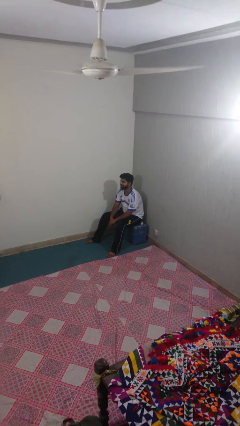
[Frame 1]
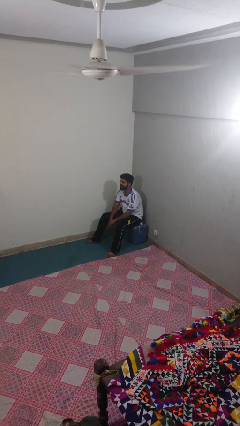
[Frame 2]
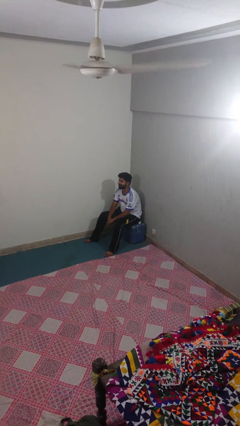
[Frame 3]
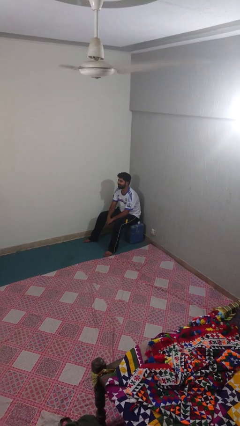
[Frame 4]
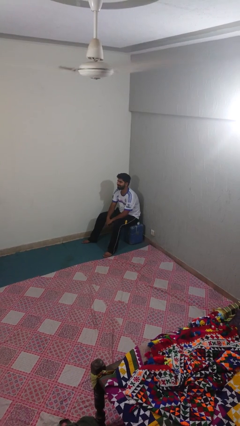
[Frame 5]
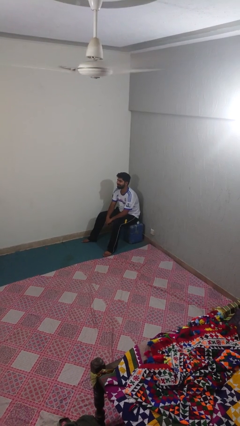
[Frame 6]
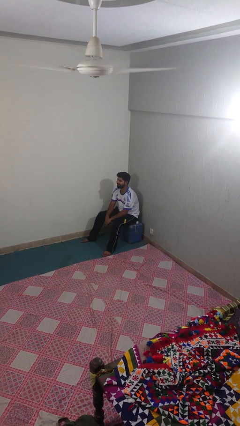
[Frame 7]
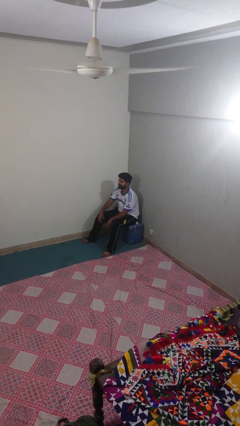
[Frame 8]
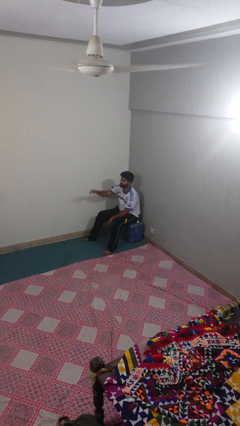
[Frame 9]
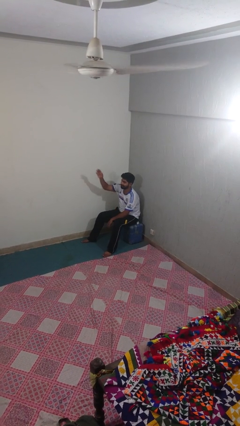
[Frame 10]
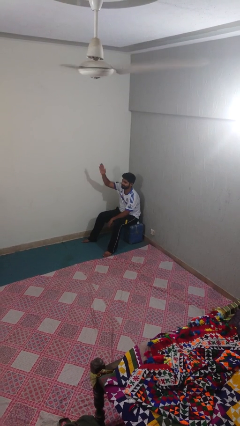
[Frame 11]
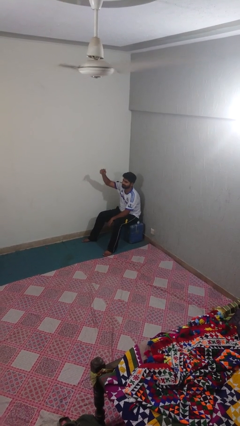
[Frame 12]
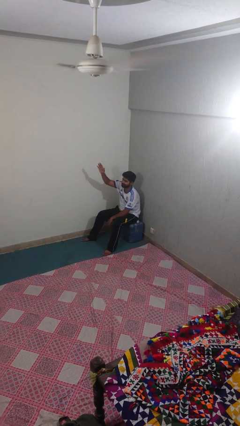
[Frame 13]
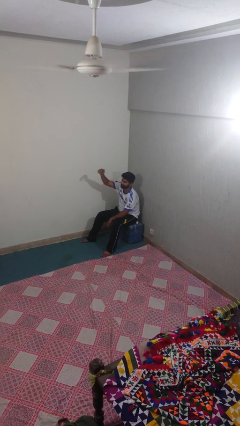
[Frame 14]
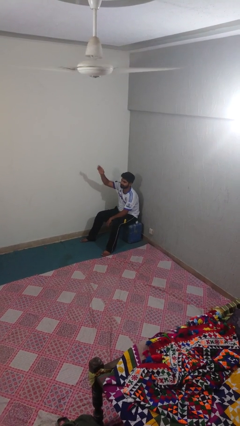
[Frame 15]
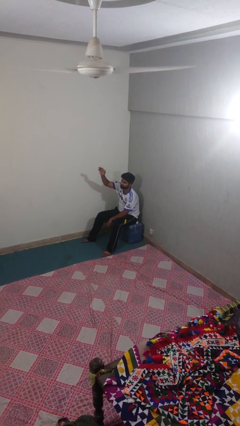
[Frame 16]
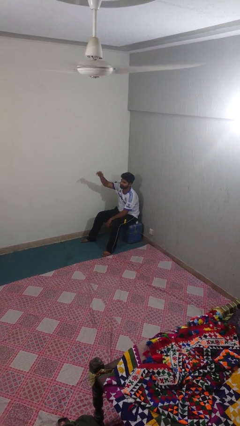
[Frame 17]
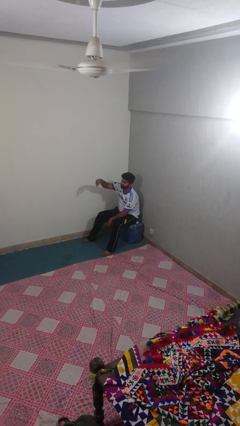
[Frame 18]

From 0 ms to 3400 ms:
person gestures come here

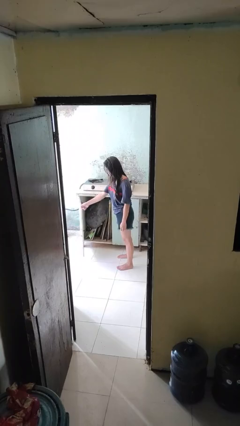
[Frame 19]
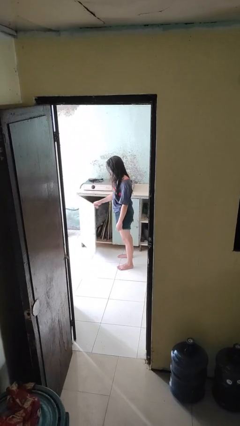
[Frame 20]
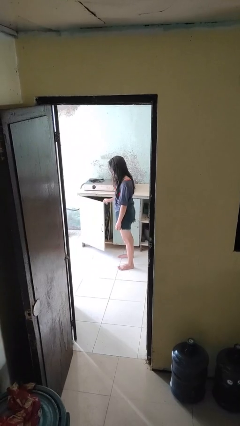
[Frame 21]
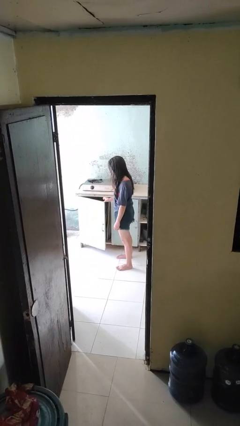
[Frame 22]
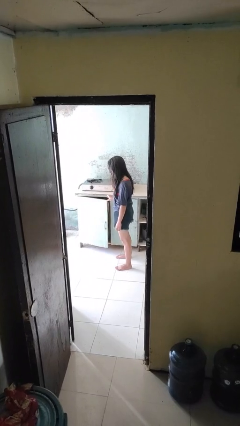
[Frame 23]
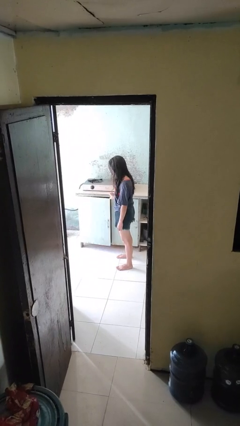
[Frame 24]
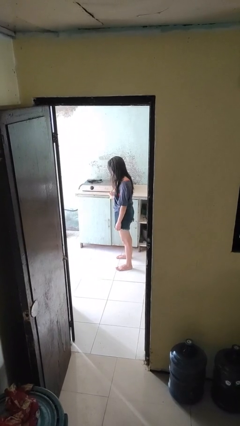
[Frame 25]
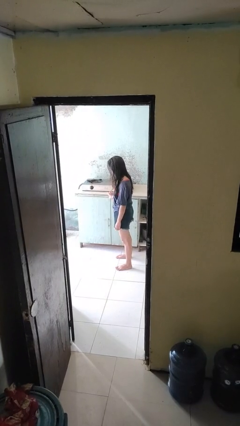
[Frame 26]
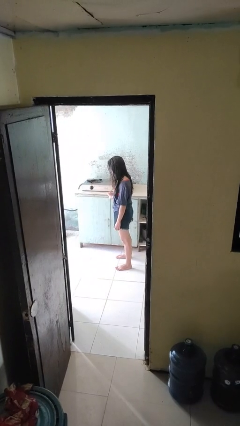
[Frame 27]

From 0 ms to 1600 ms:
person closes cabinet

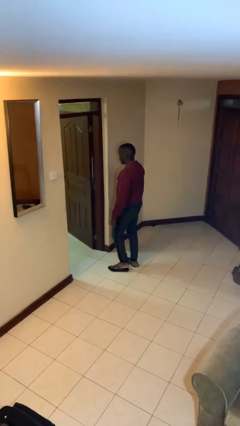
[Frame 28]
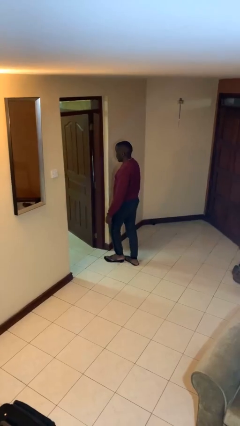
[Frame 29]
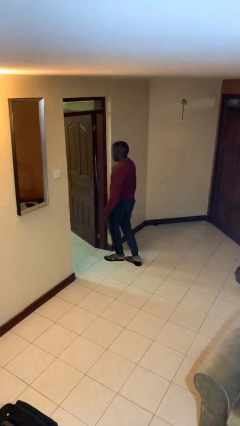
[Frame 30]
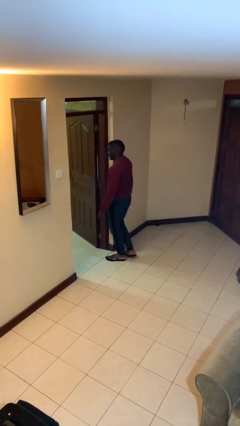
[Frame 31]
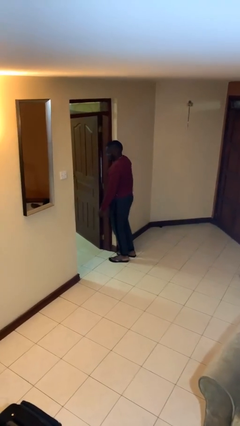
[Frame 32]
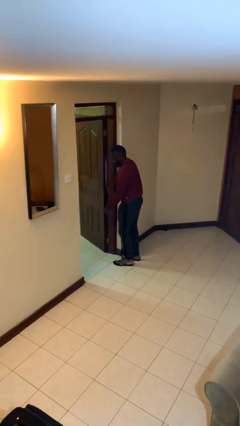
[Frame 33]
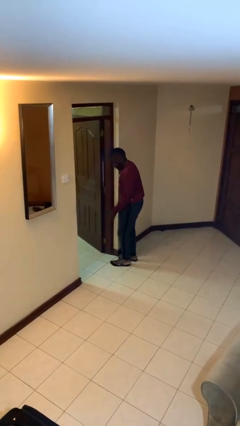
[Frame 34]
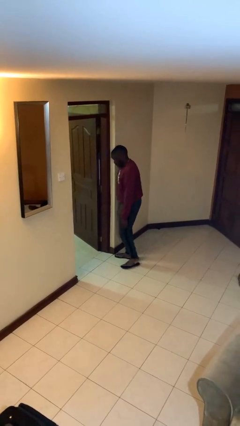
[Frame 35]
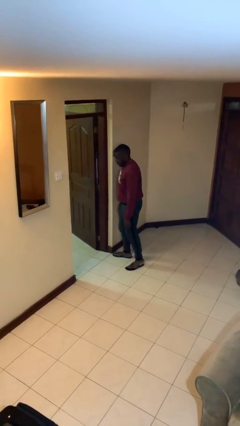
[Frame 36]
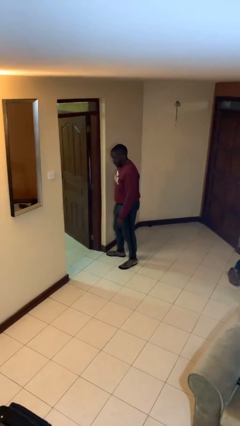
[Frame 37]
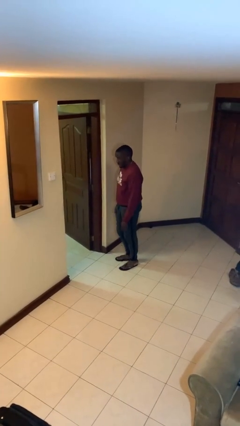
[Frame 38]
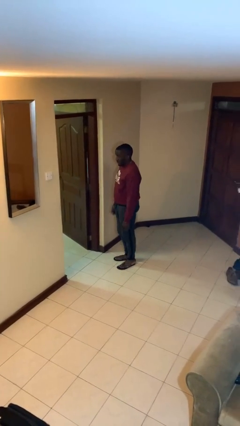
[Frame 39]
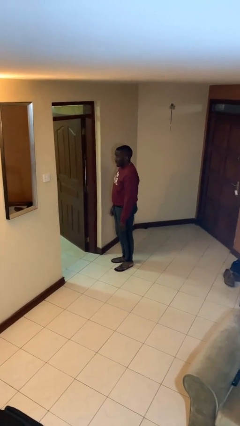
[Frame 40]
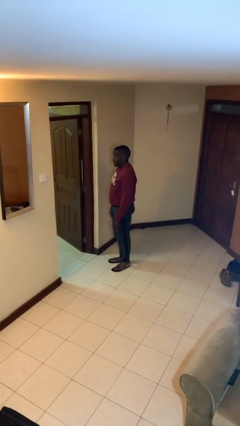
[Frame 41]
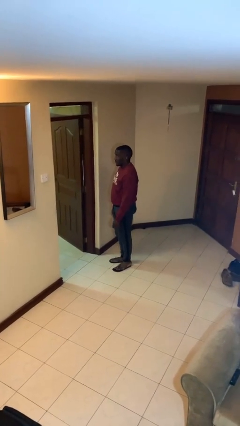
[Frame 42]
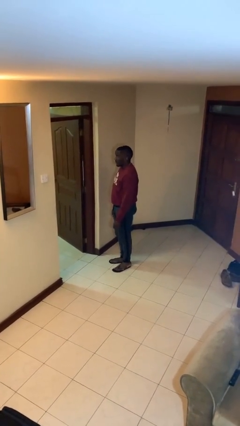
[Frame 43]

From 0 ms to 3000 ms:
person bumps into wall

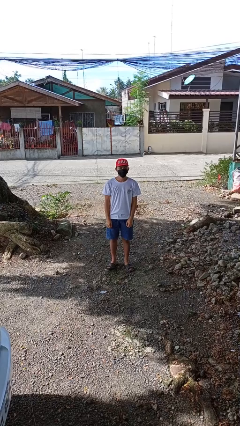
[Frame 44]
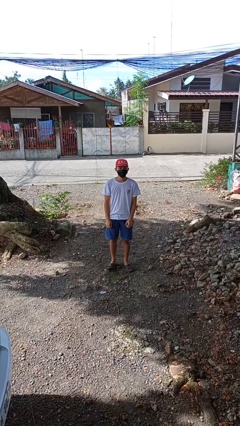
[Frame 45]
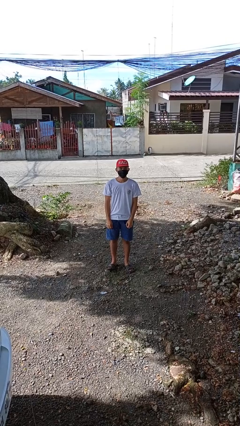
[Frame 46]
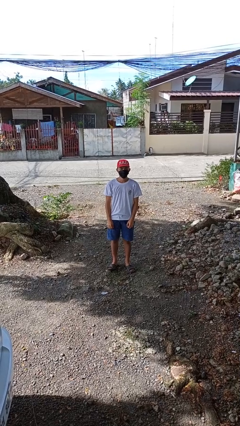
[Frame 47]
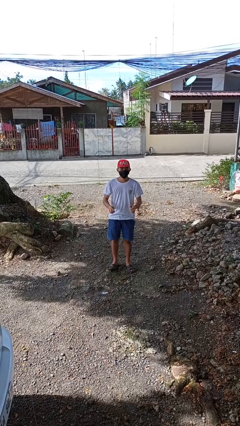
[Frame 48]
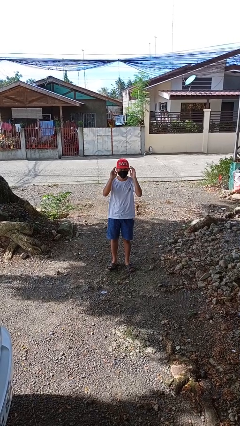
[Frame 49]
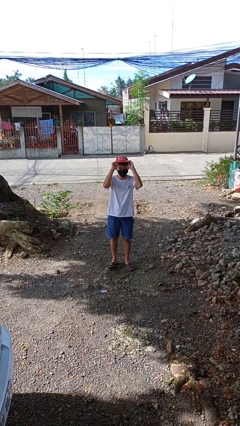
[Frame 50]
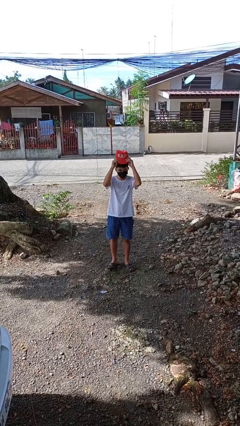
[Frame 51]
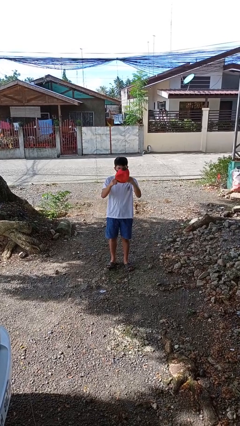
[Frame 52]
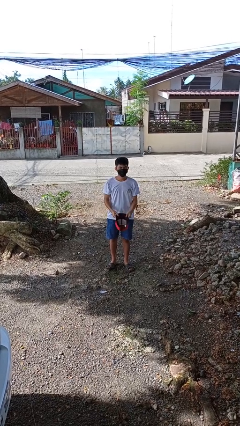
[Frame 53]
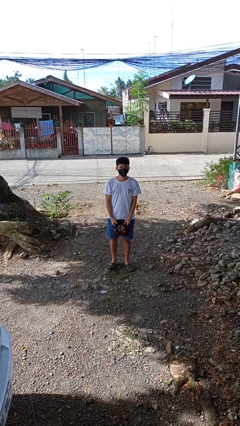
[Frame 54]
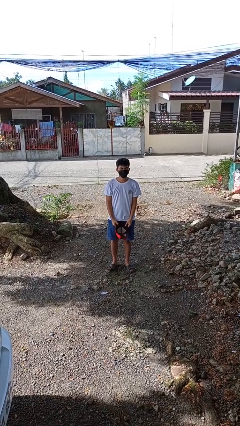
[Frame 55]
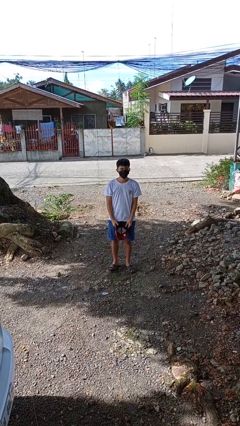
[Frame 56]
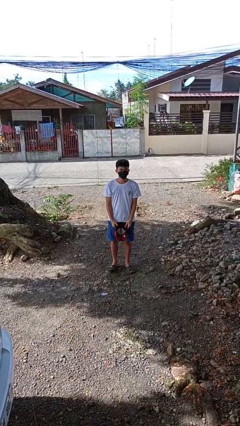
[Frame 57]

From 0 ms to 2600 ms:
person takes off hat

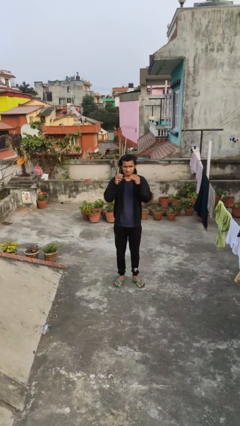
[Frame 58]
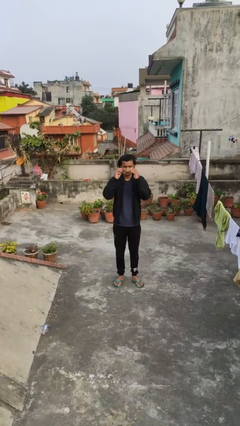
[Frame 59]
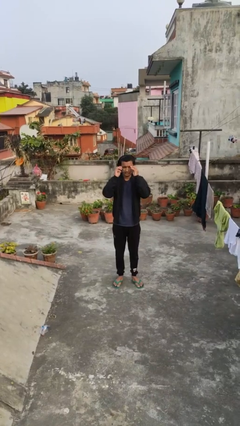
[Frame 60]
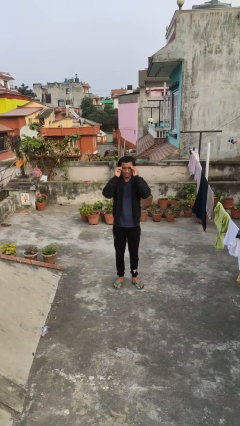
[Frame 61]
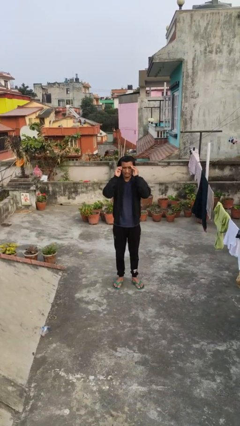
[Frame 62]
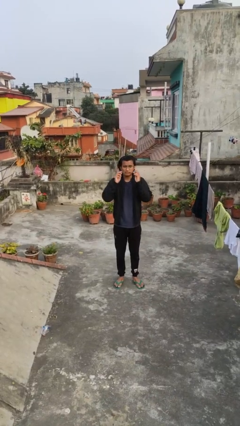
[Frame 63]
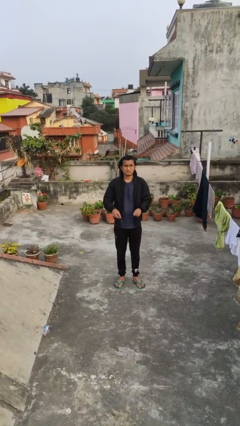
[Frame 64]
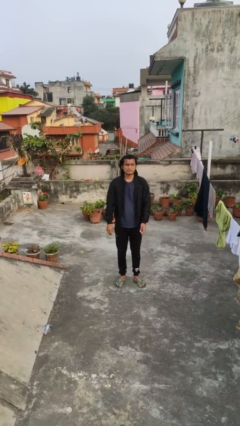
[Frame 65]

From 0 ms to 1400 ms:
person puts on glasses

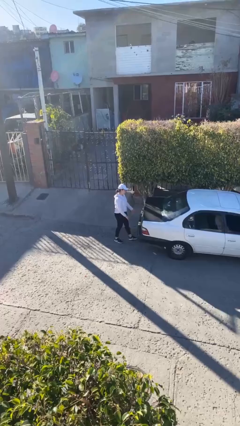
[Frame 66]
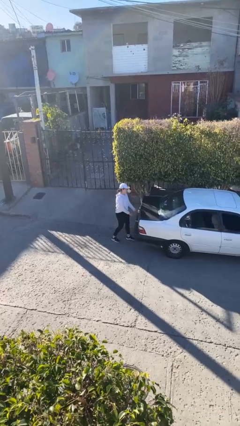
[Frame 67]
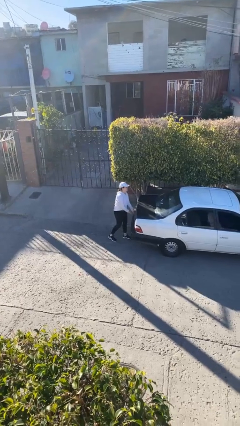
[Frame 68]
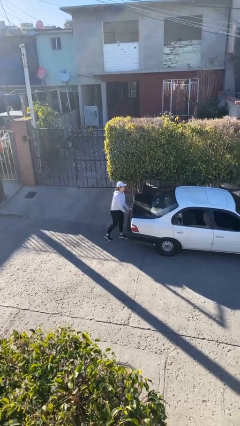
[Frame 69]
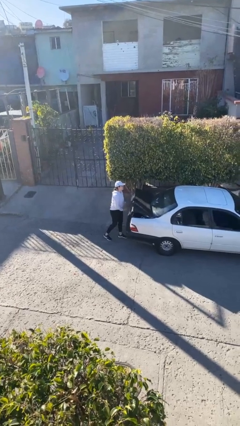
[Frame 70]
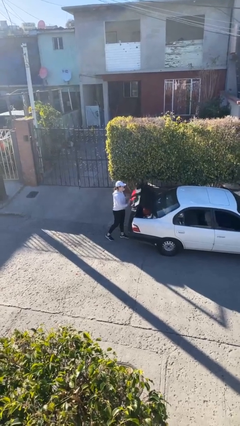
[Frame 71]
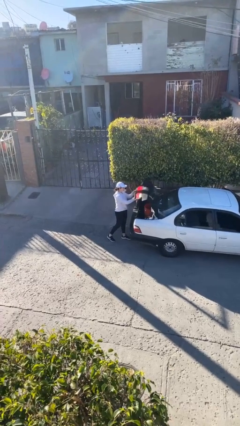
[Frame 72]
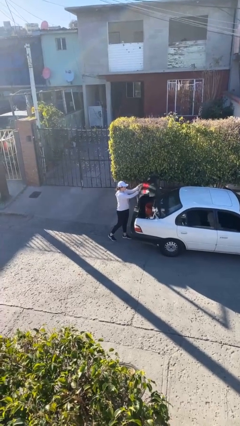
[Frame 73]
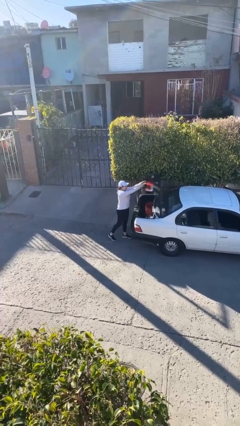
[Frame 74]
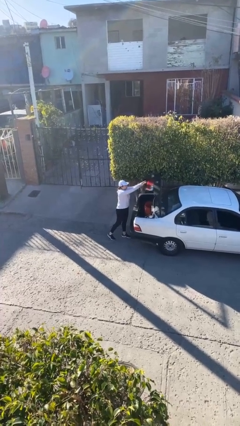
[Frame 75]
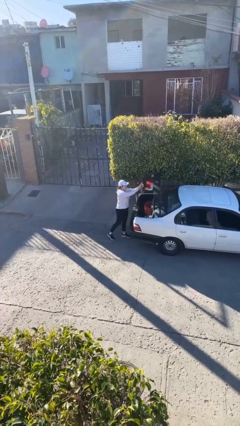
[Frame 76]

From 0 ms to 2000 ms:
person opens car trunk

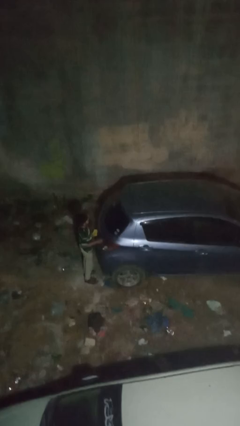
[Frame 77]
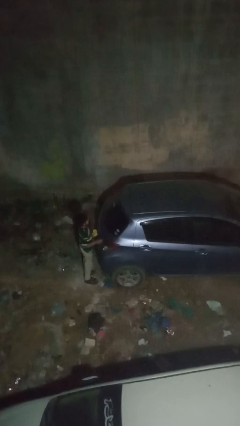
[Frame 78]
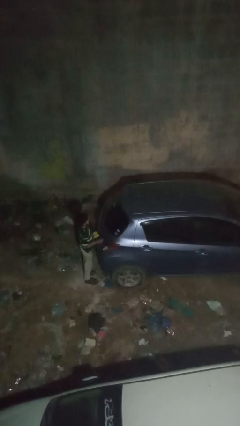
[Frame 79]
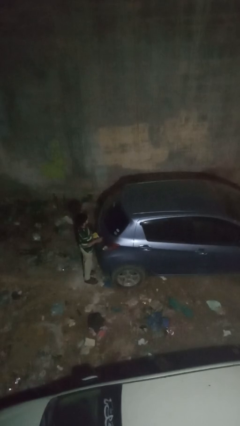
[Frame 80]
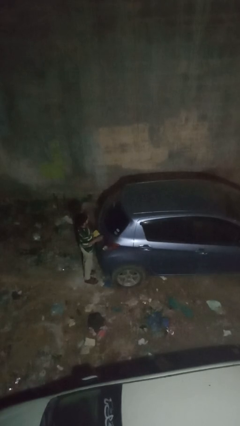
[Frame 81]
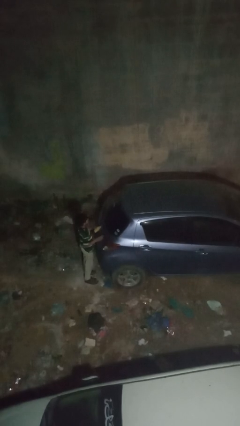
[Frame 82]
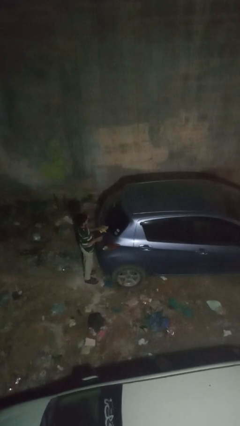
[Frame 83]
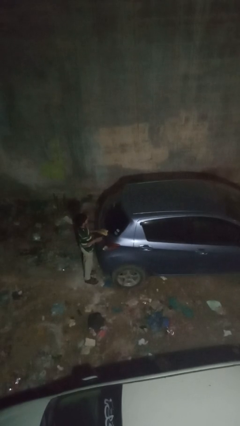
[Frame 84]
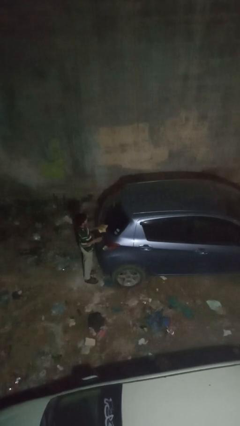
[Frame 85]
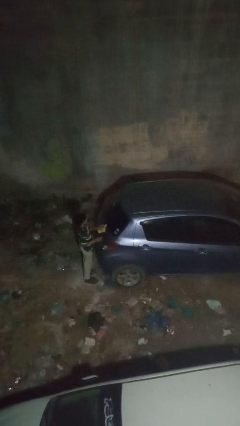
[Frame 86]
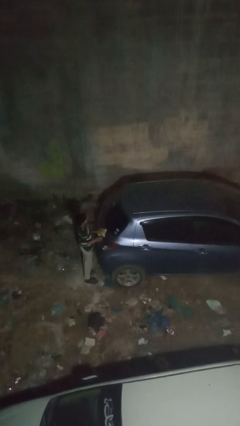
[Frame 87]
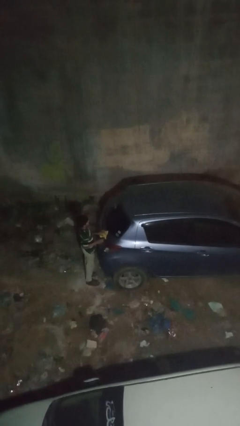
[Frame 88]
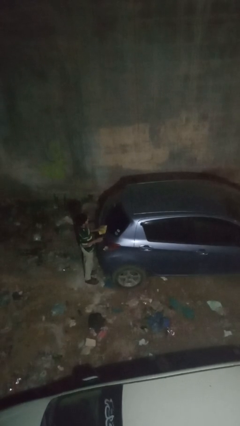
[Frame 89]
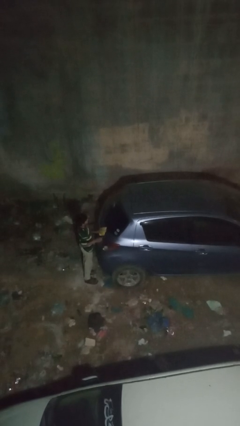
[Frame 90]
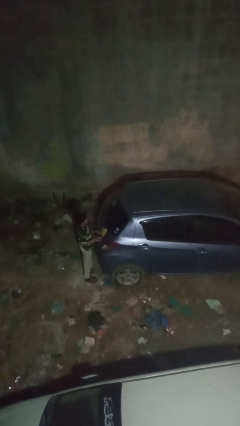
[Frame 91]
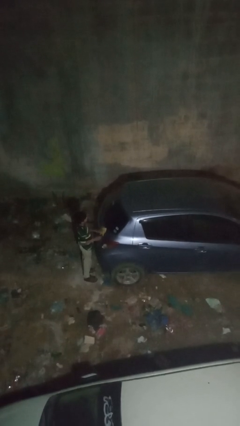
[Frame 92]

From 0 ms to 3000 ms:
person polishes car with rag
